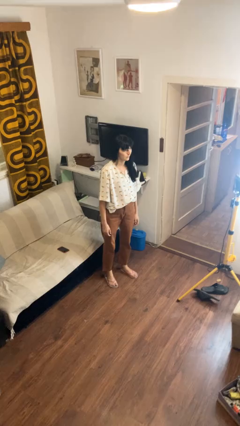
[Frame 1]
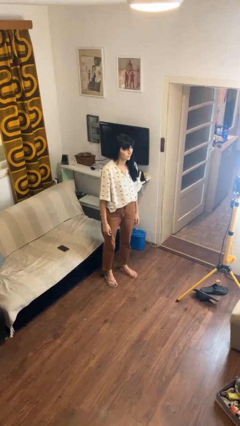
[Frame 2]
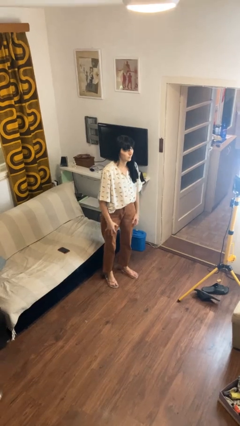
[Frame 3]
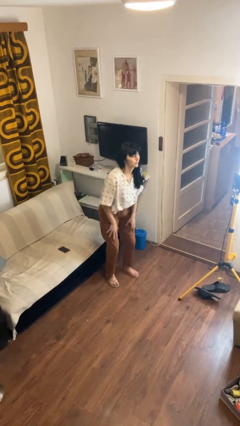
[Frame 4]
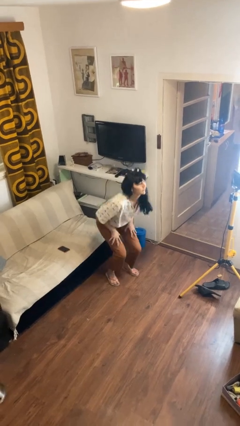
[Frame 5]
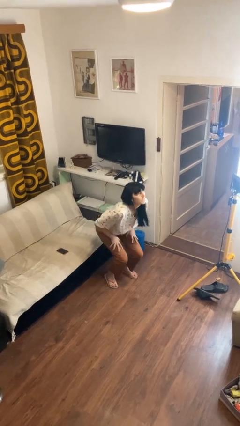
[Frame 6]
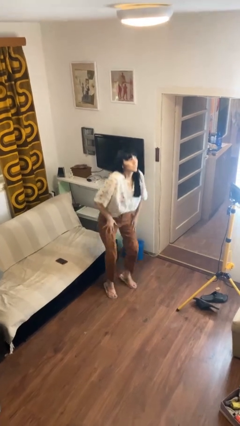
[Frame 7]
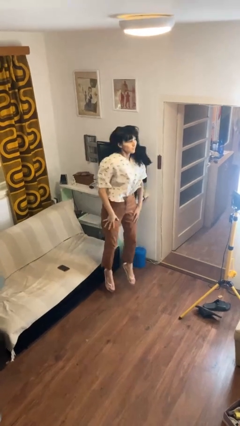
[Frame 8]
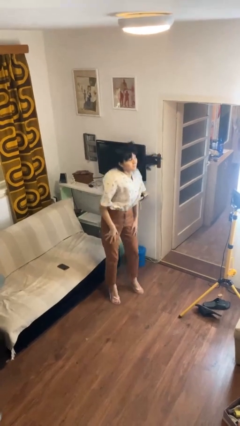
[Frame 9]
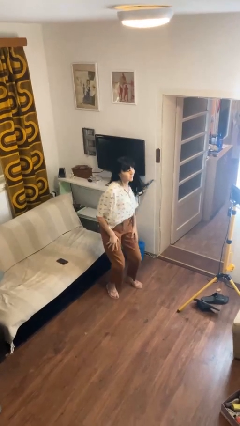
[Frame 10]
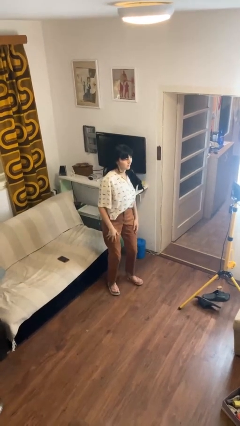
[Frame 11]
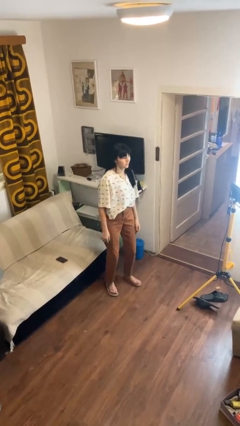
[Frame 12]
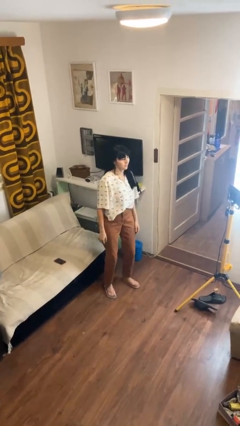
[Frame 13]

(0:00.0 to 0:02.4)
person jumps

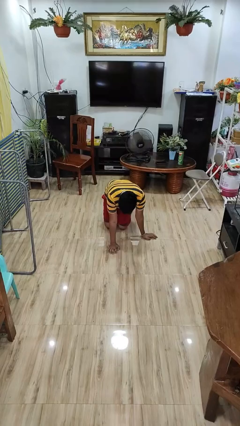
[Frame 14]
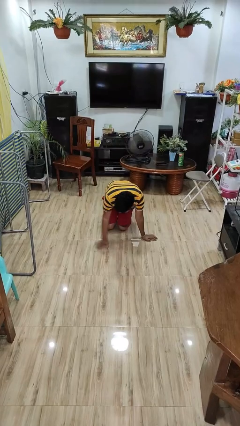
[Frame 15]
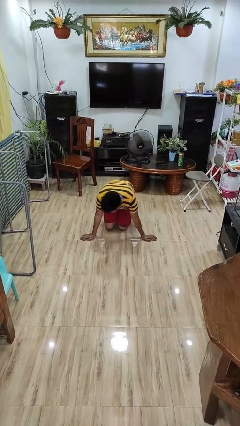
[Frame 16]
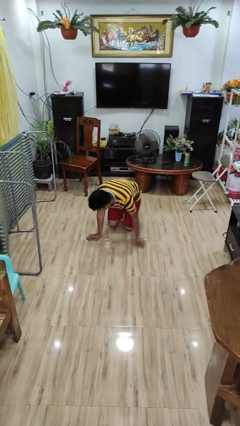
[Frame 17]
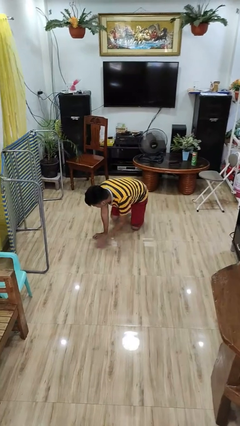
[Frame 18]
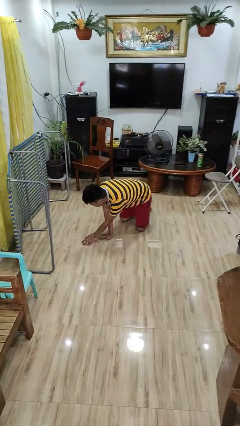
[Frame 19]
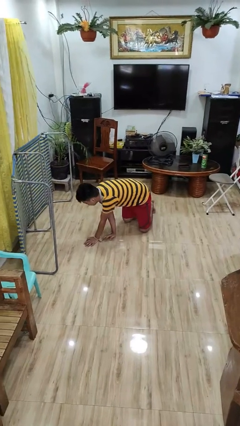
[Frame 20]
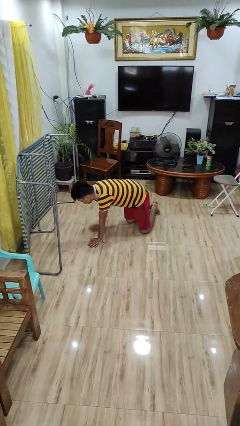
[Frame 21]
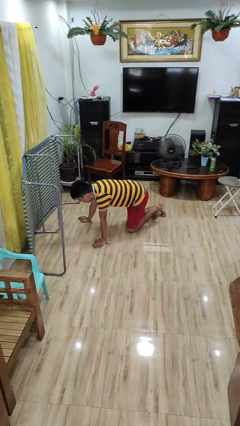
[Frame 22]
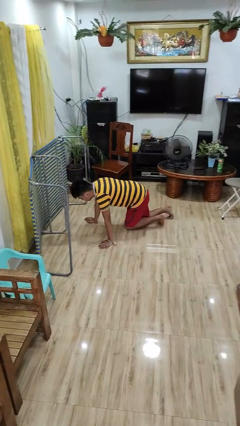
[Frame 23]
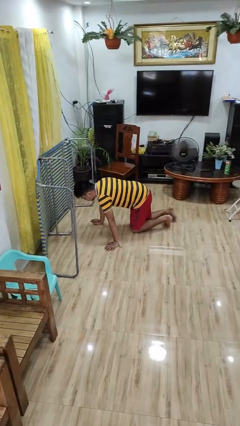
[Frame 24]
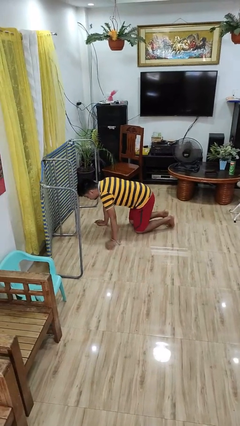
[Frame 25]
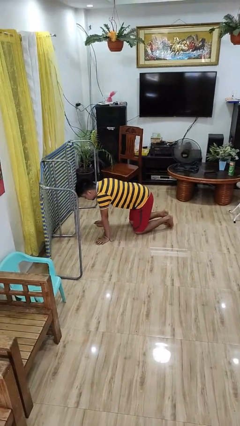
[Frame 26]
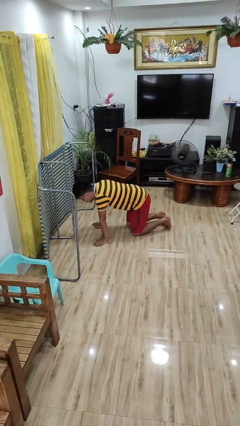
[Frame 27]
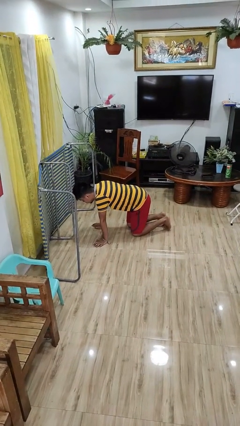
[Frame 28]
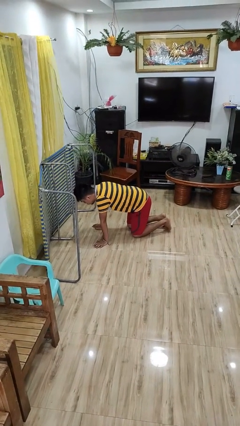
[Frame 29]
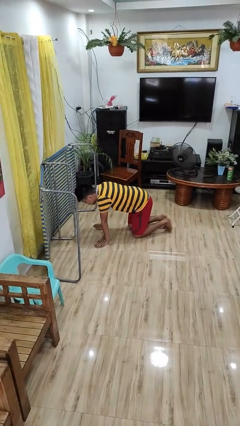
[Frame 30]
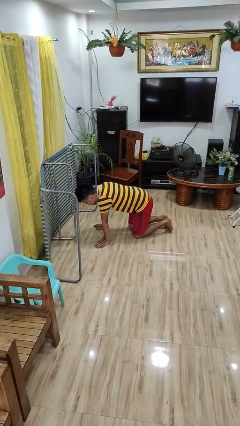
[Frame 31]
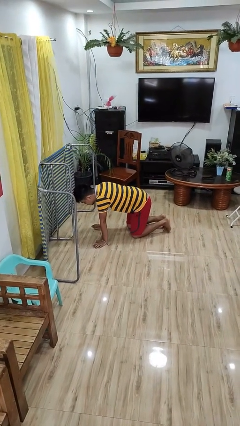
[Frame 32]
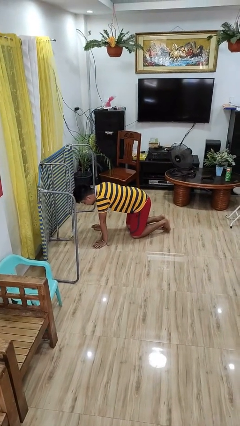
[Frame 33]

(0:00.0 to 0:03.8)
person crawls

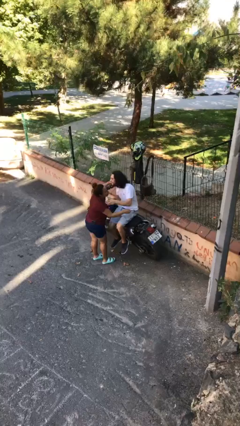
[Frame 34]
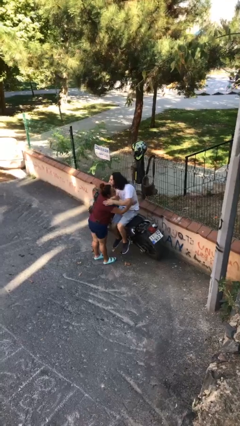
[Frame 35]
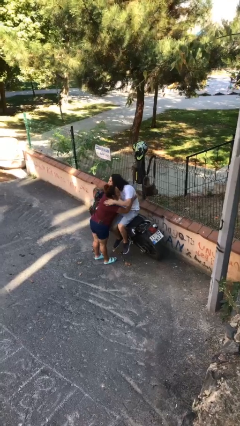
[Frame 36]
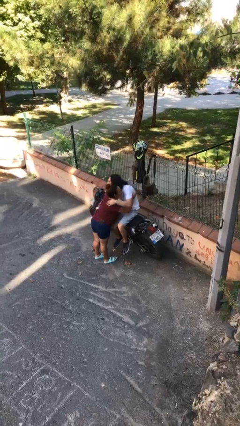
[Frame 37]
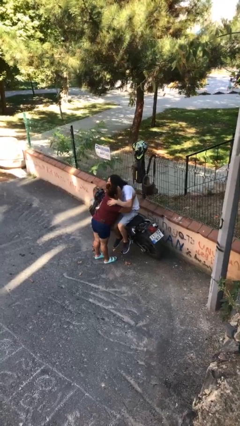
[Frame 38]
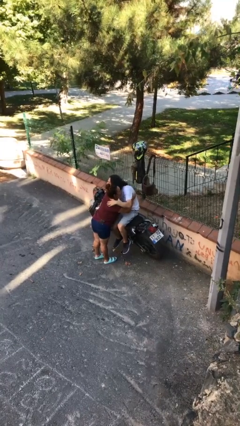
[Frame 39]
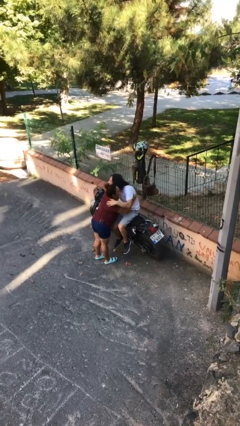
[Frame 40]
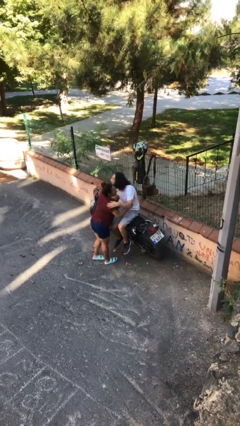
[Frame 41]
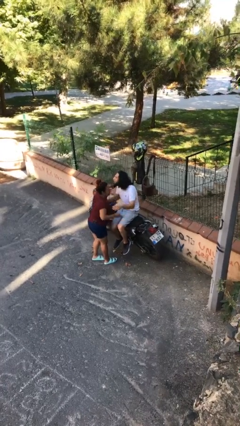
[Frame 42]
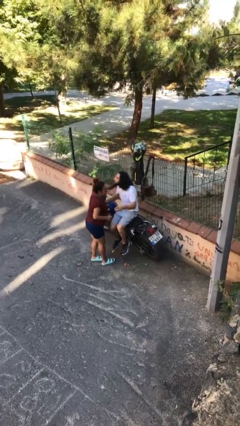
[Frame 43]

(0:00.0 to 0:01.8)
person embraces person

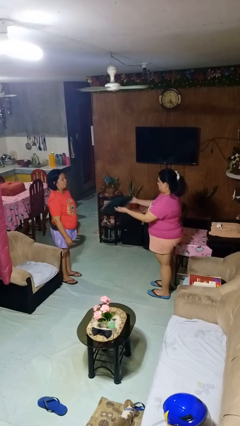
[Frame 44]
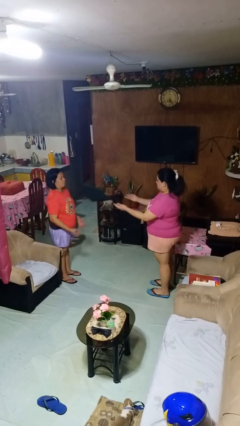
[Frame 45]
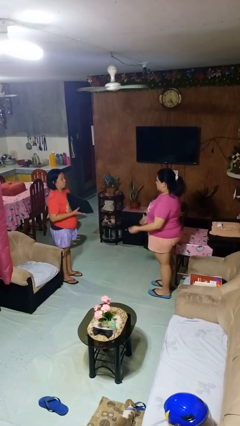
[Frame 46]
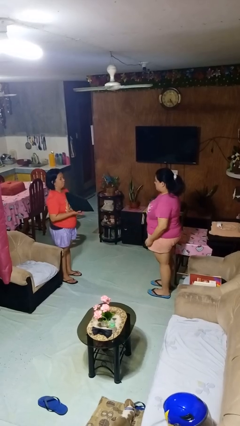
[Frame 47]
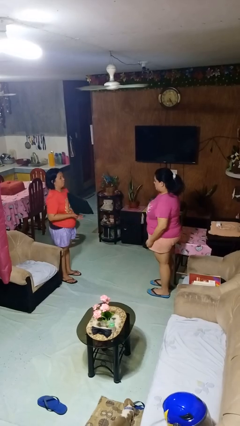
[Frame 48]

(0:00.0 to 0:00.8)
person throws object to person

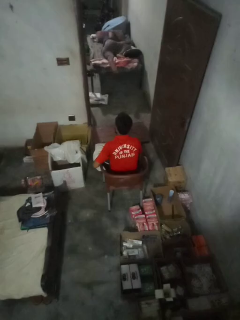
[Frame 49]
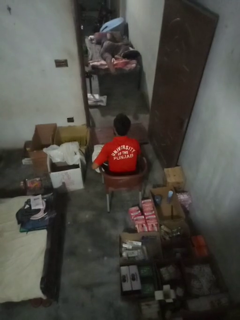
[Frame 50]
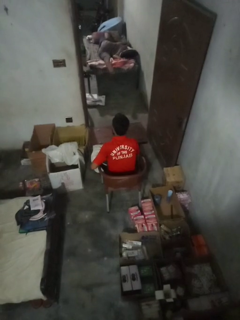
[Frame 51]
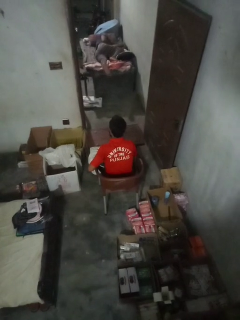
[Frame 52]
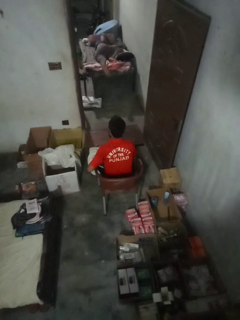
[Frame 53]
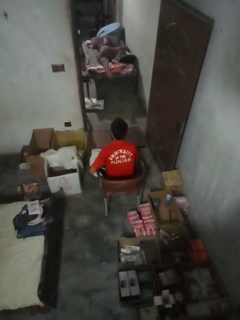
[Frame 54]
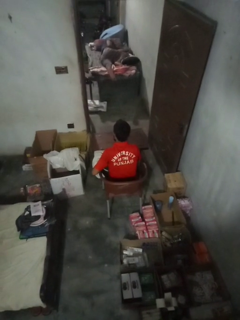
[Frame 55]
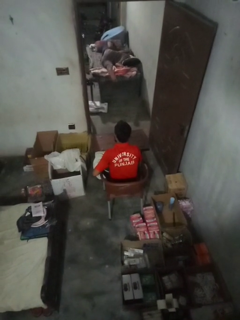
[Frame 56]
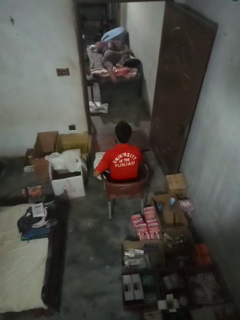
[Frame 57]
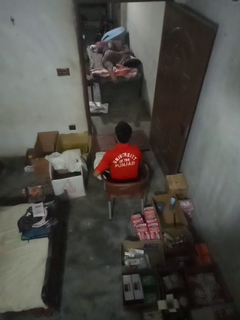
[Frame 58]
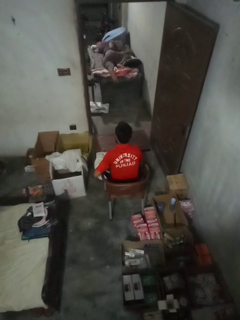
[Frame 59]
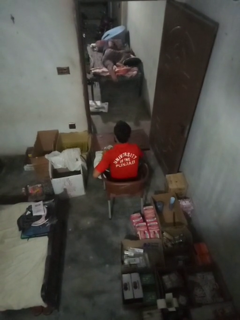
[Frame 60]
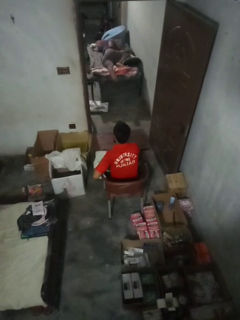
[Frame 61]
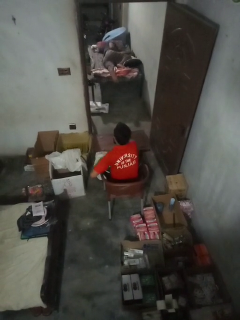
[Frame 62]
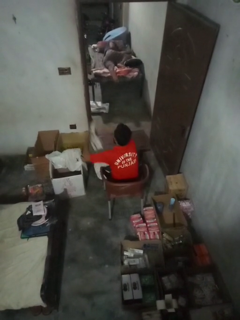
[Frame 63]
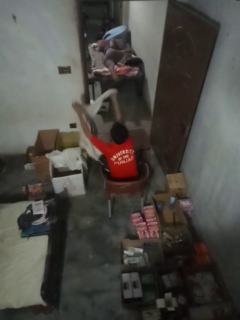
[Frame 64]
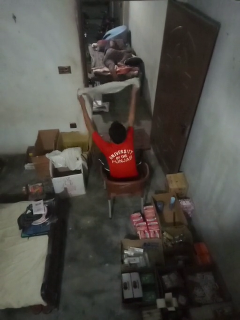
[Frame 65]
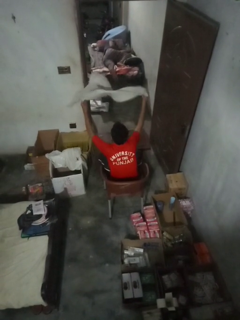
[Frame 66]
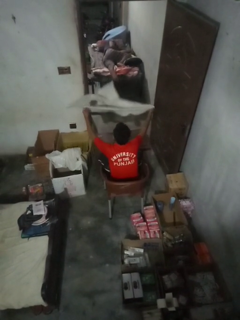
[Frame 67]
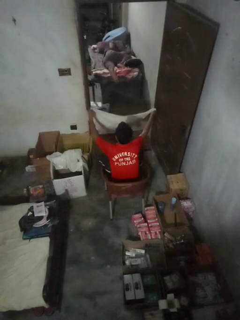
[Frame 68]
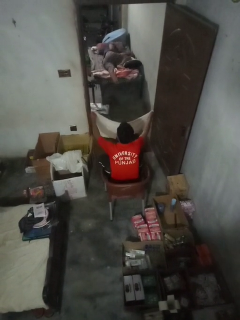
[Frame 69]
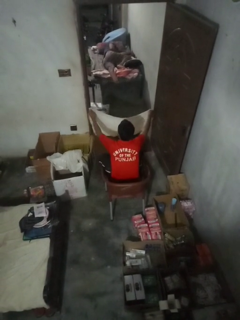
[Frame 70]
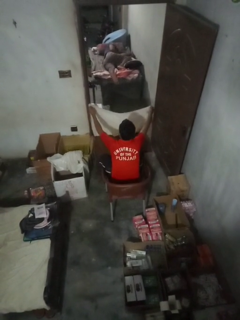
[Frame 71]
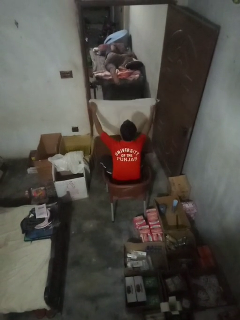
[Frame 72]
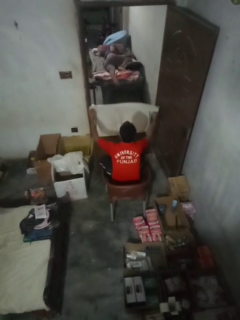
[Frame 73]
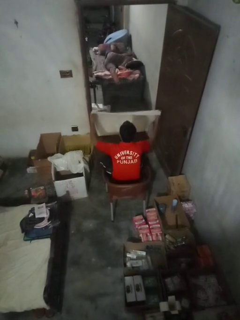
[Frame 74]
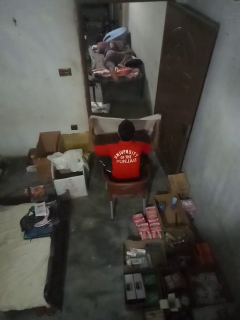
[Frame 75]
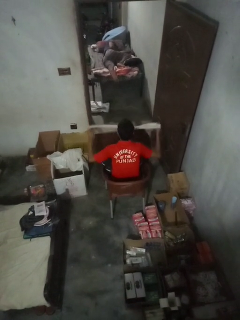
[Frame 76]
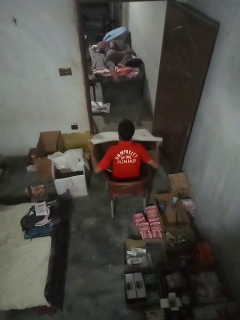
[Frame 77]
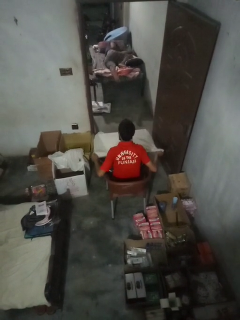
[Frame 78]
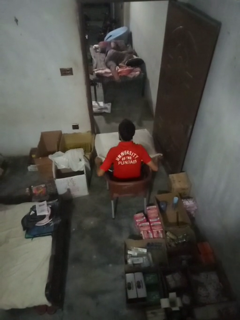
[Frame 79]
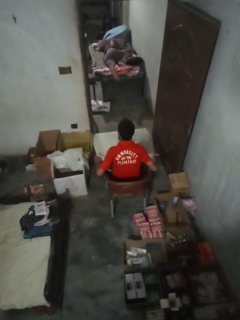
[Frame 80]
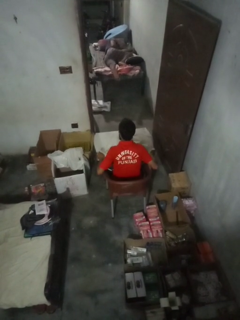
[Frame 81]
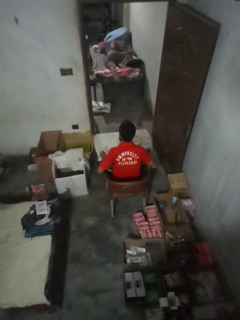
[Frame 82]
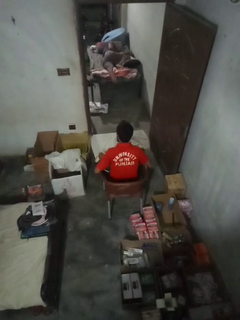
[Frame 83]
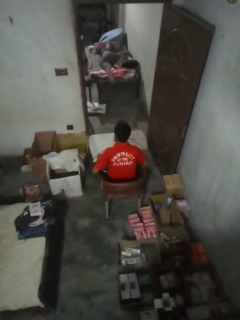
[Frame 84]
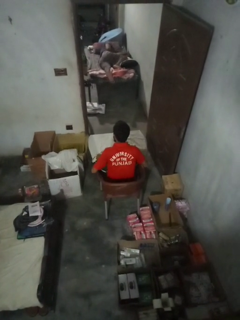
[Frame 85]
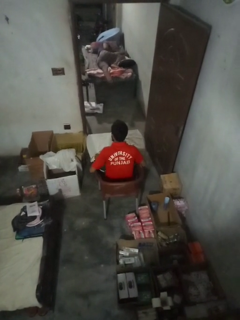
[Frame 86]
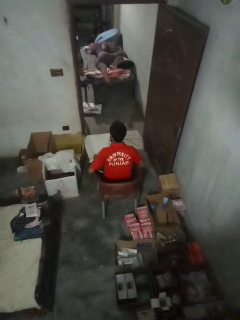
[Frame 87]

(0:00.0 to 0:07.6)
person spreads tablecloth

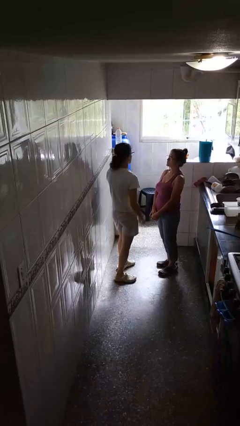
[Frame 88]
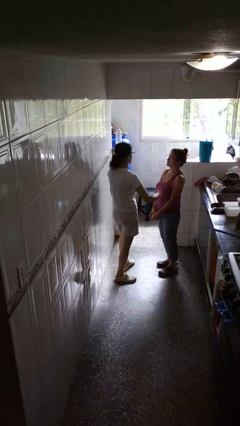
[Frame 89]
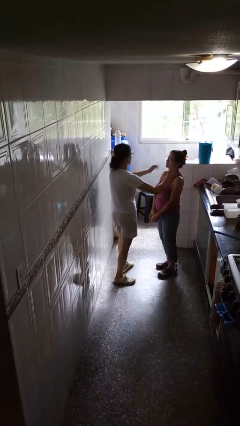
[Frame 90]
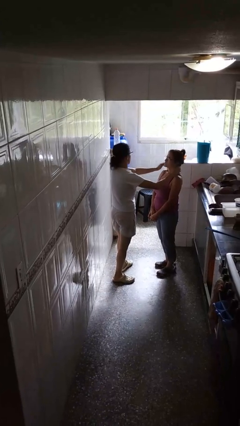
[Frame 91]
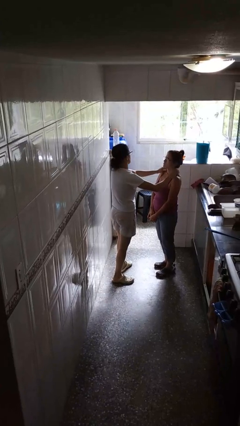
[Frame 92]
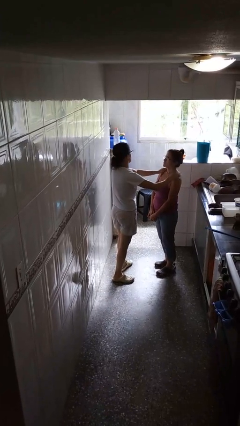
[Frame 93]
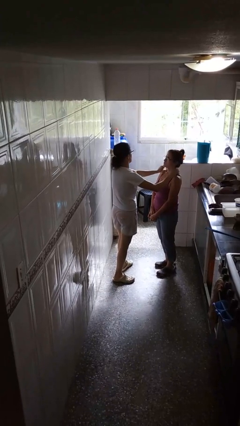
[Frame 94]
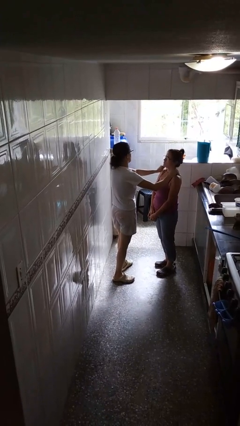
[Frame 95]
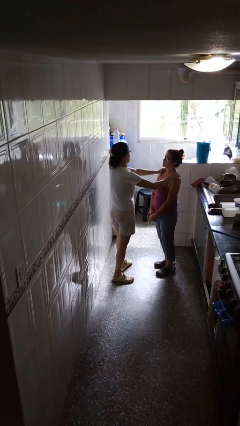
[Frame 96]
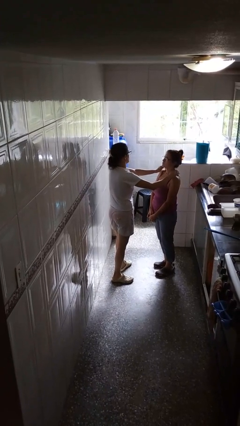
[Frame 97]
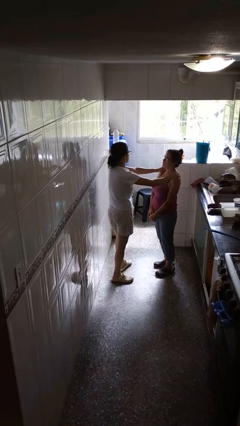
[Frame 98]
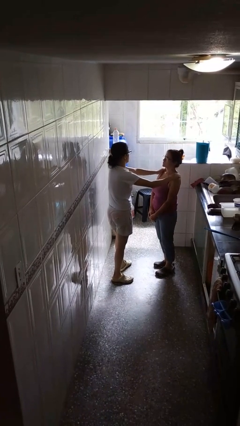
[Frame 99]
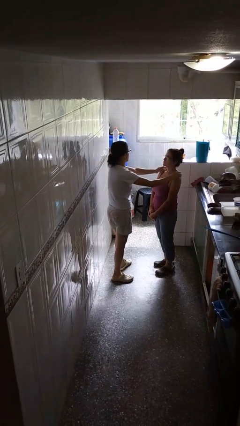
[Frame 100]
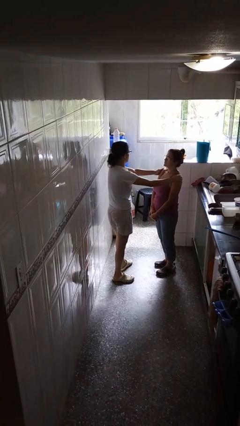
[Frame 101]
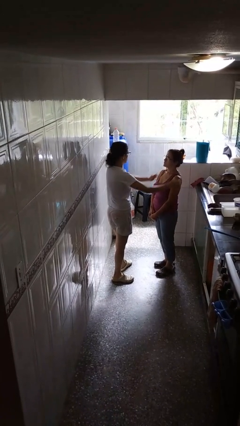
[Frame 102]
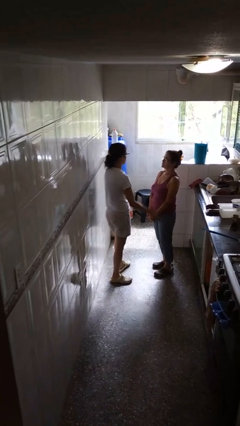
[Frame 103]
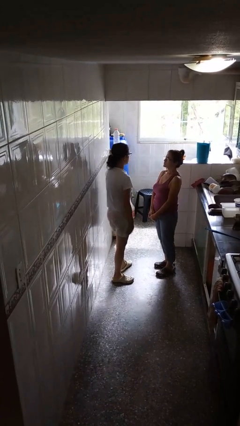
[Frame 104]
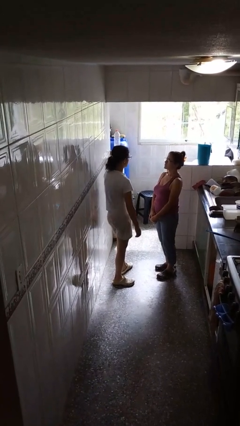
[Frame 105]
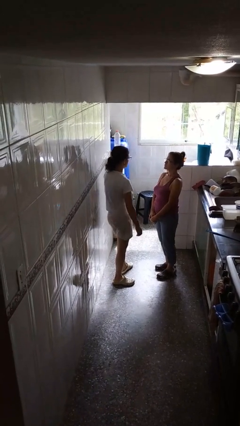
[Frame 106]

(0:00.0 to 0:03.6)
person pounds shoulders of person
